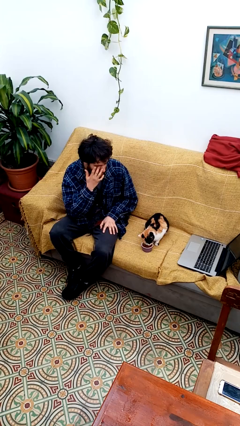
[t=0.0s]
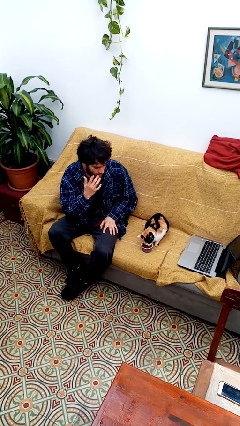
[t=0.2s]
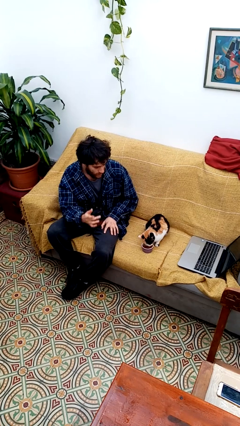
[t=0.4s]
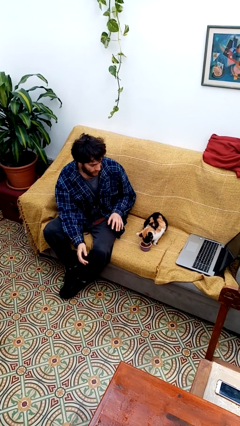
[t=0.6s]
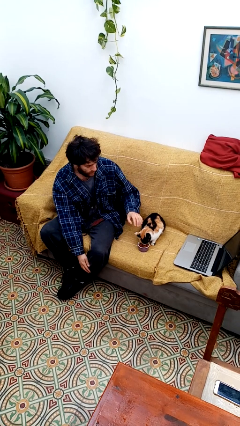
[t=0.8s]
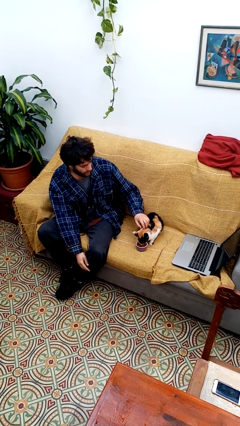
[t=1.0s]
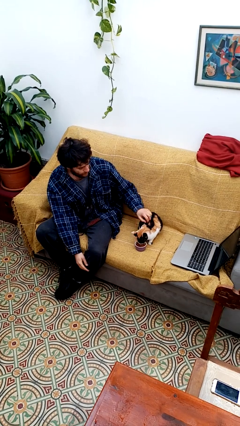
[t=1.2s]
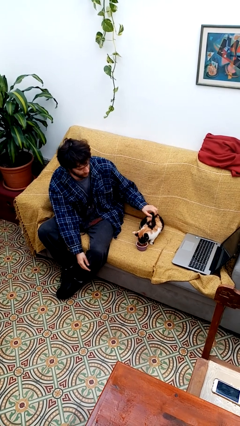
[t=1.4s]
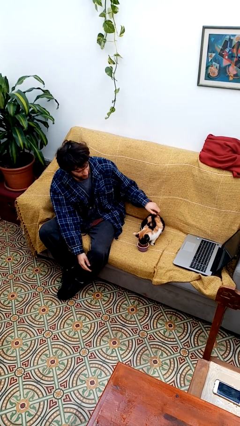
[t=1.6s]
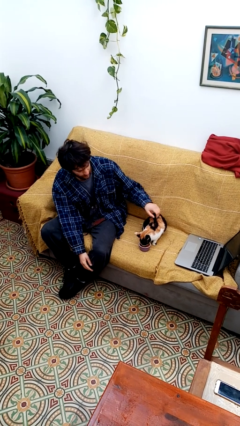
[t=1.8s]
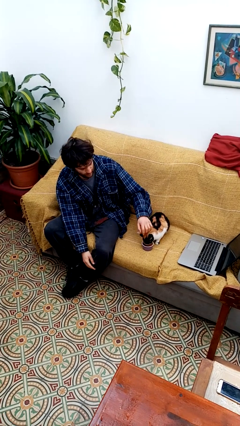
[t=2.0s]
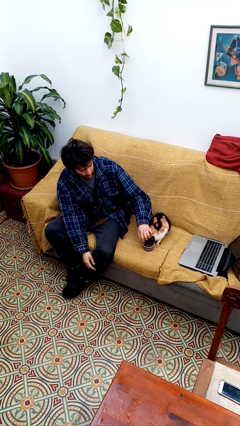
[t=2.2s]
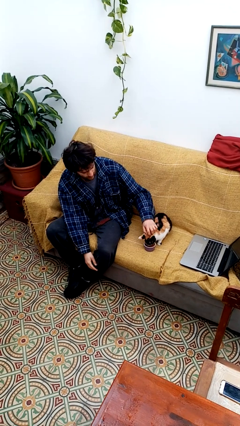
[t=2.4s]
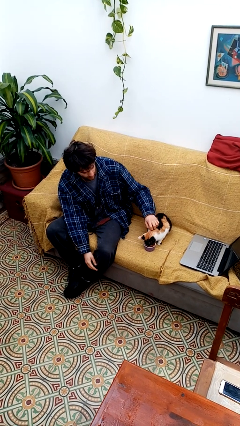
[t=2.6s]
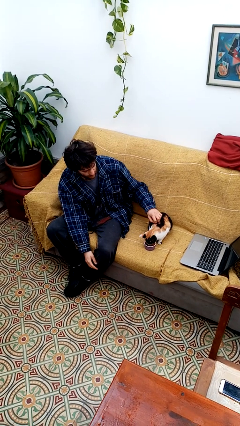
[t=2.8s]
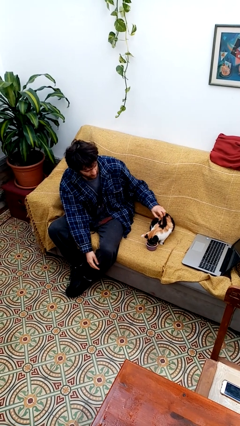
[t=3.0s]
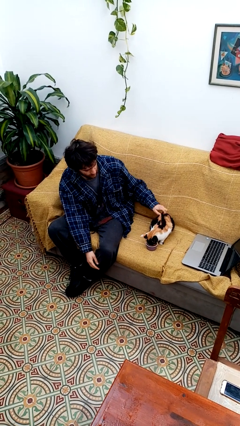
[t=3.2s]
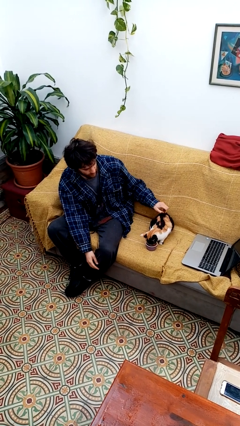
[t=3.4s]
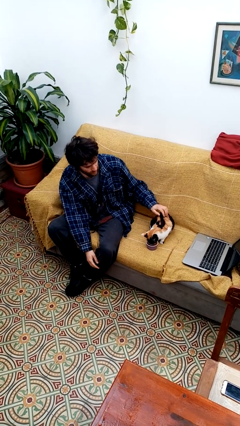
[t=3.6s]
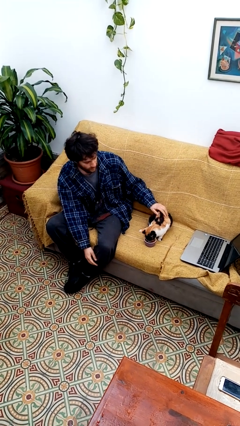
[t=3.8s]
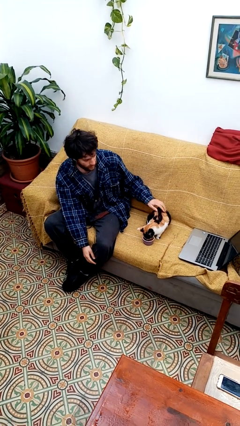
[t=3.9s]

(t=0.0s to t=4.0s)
person pets cat

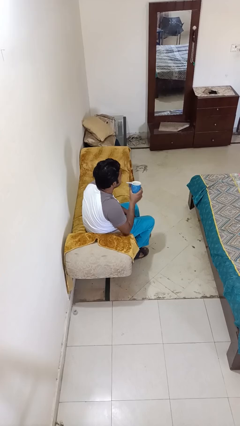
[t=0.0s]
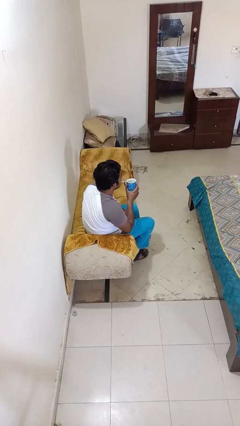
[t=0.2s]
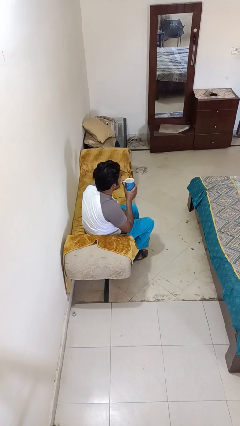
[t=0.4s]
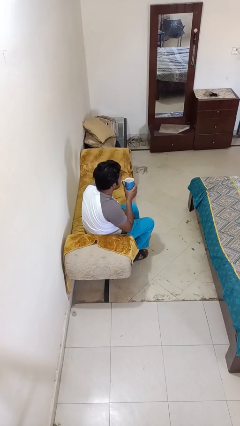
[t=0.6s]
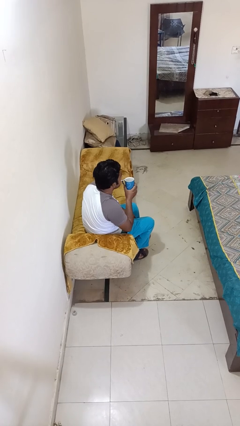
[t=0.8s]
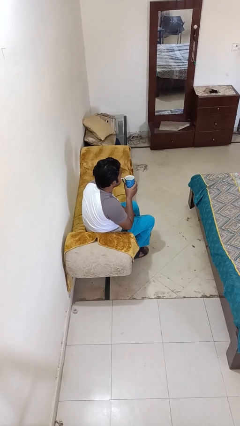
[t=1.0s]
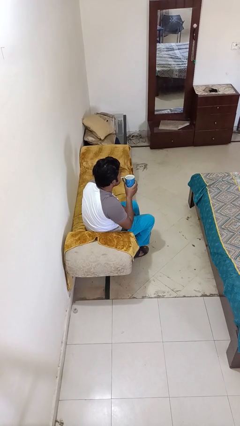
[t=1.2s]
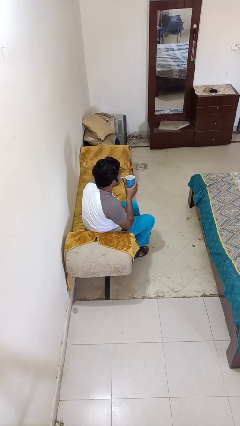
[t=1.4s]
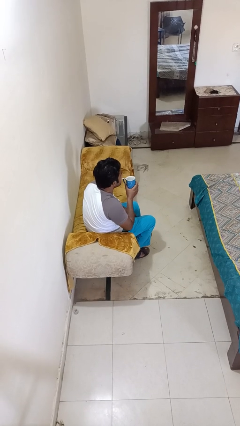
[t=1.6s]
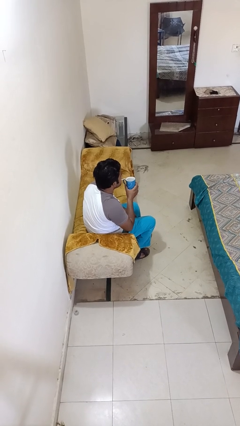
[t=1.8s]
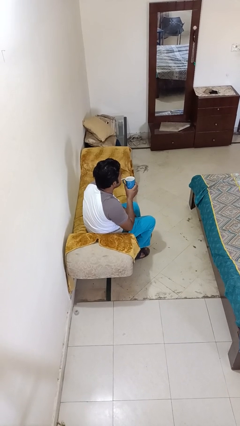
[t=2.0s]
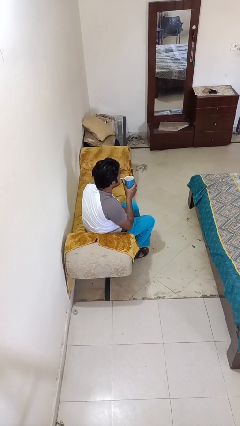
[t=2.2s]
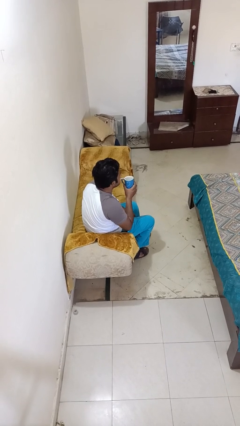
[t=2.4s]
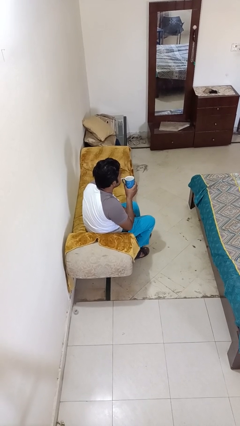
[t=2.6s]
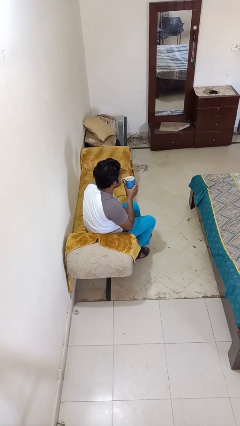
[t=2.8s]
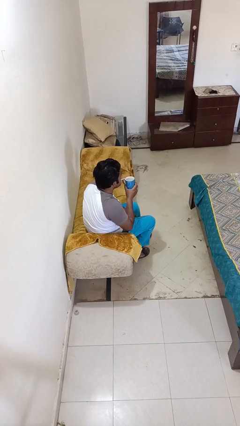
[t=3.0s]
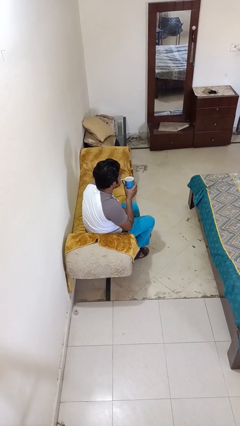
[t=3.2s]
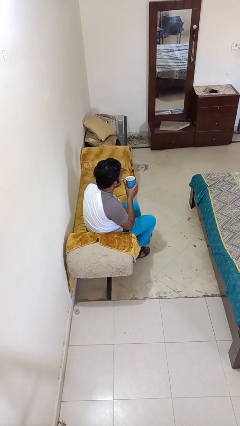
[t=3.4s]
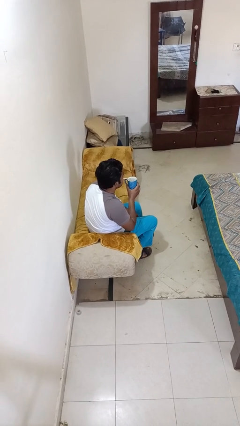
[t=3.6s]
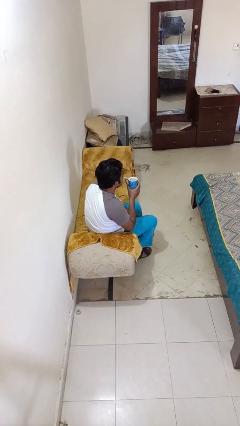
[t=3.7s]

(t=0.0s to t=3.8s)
person drinks from straw

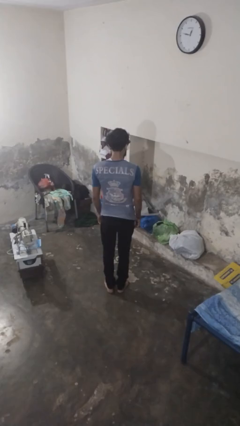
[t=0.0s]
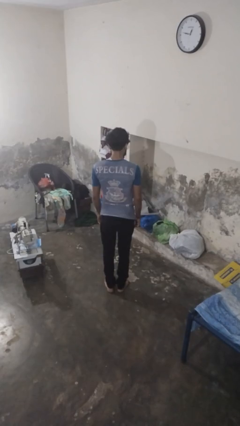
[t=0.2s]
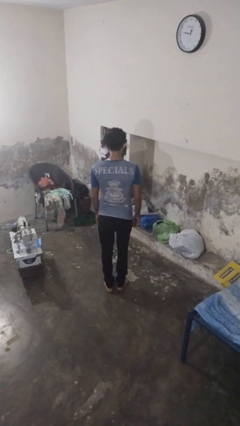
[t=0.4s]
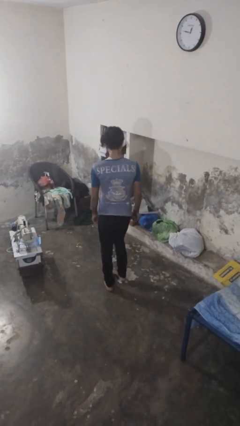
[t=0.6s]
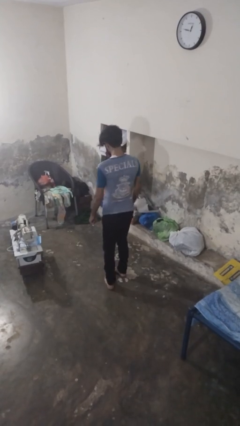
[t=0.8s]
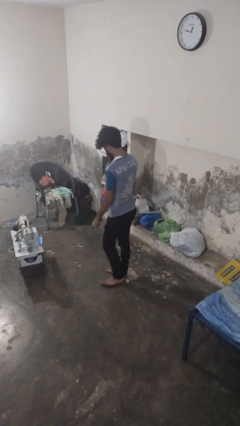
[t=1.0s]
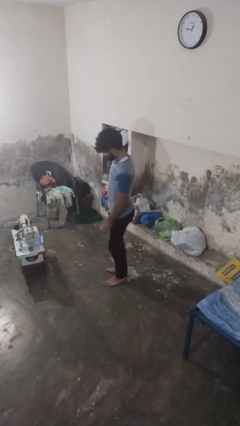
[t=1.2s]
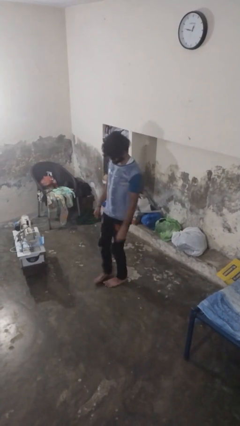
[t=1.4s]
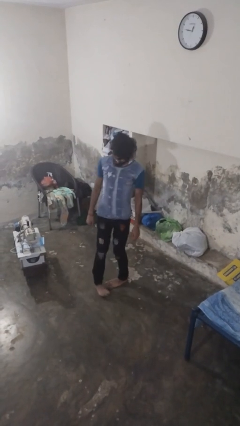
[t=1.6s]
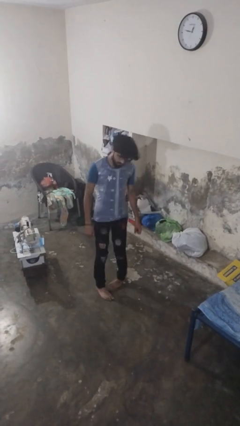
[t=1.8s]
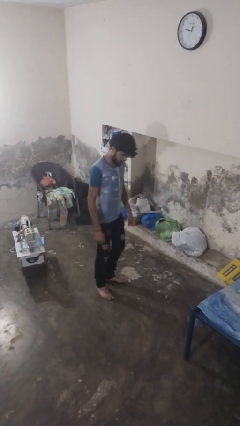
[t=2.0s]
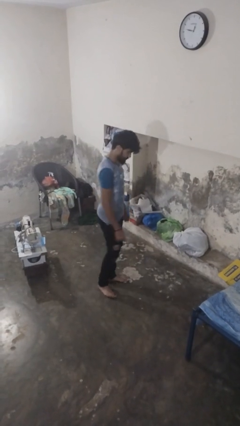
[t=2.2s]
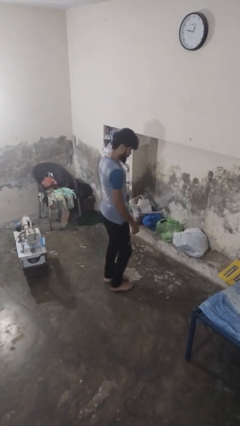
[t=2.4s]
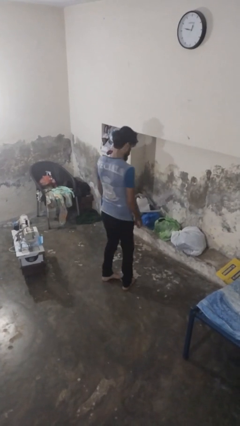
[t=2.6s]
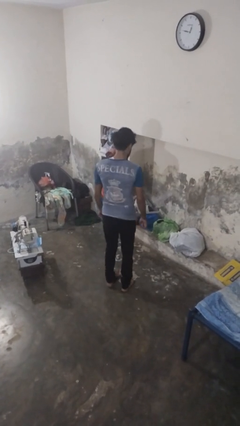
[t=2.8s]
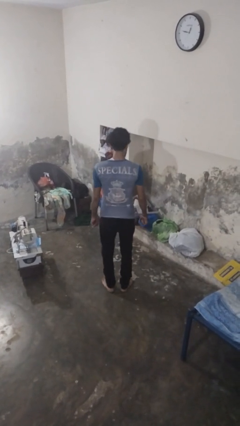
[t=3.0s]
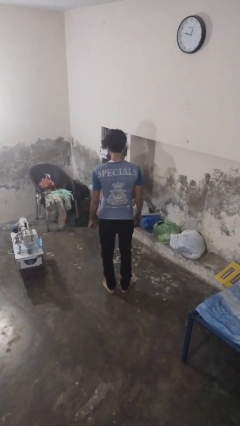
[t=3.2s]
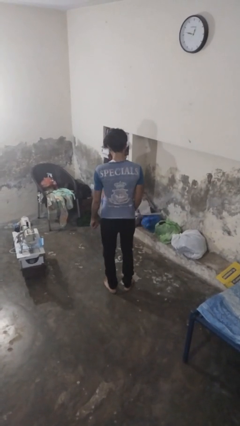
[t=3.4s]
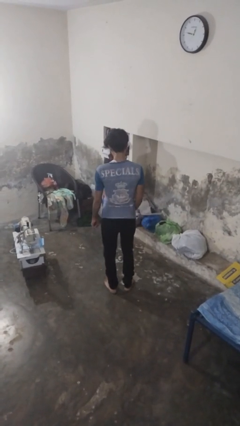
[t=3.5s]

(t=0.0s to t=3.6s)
person twirls

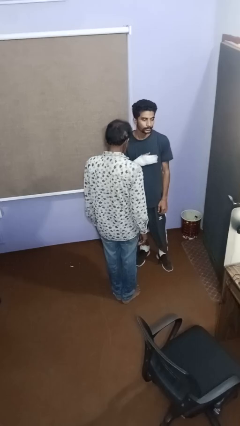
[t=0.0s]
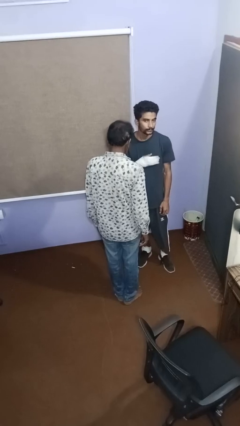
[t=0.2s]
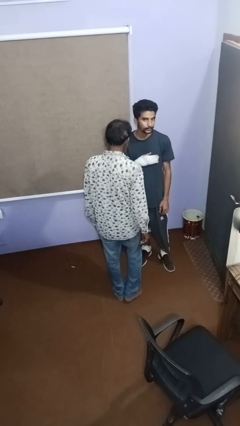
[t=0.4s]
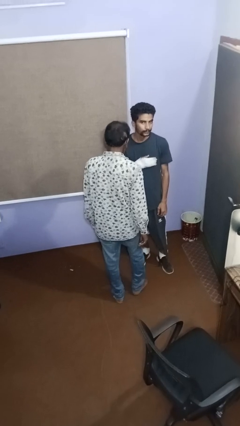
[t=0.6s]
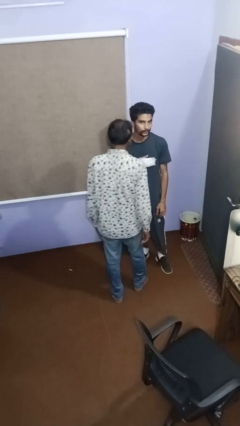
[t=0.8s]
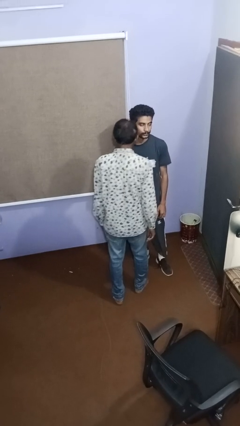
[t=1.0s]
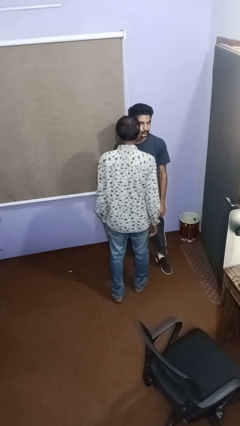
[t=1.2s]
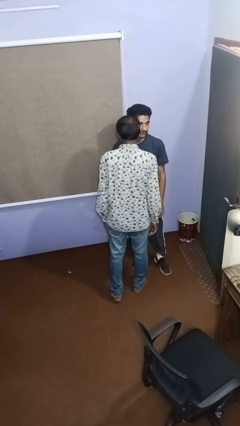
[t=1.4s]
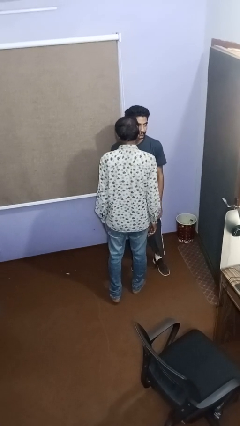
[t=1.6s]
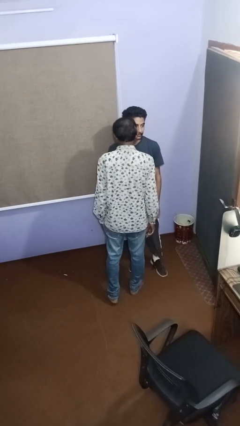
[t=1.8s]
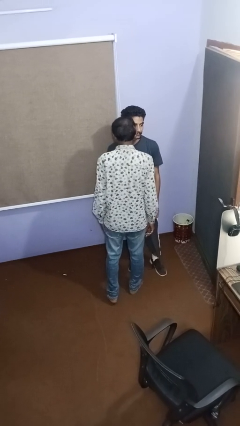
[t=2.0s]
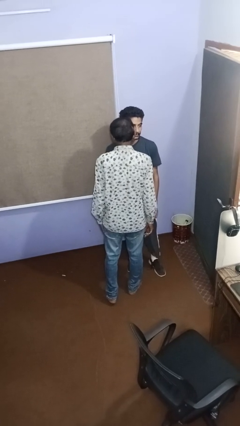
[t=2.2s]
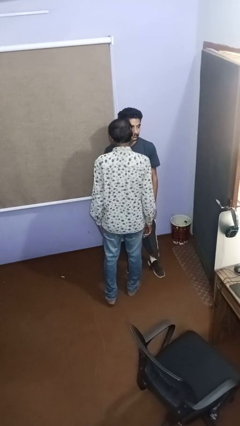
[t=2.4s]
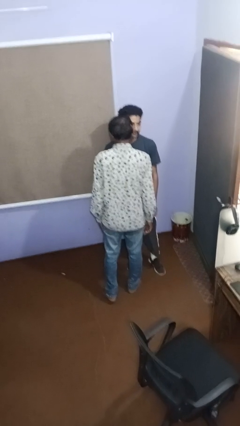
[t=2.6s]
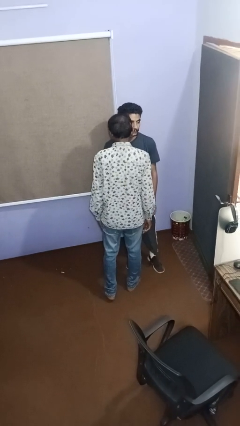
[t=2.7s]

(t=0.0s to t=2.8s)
person kisses cheek of person

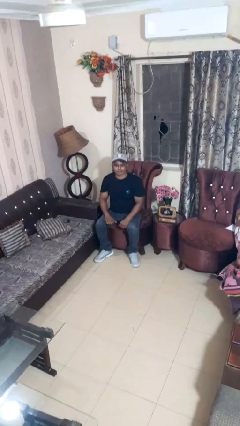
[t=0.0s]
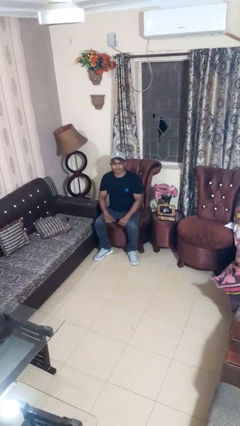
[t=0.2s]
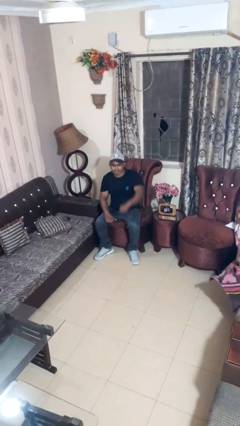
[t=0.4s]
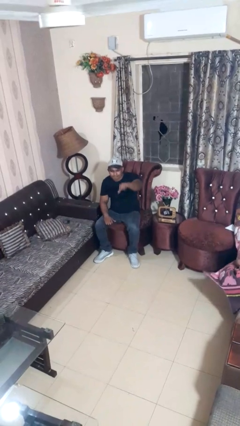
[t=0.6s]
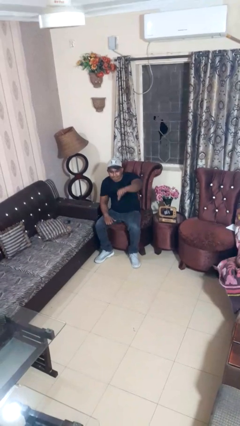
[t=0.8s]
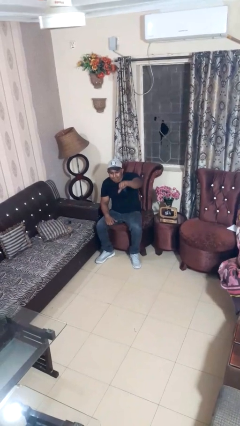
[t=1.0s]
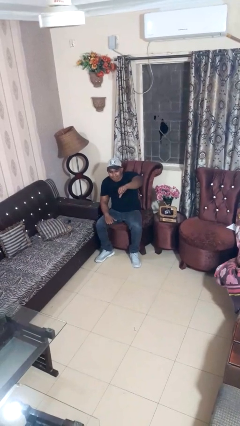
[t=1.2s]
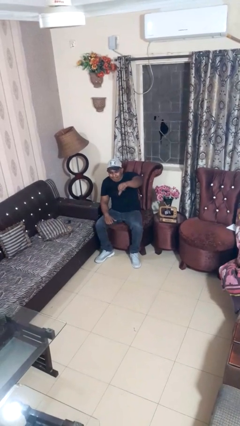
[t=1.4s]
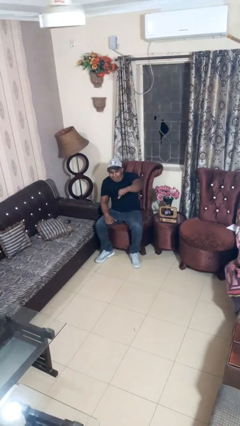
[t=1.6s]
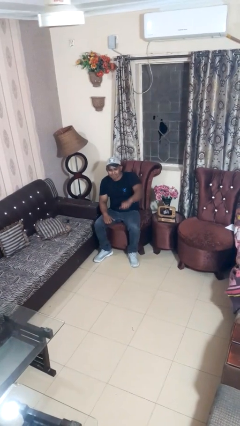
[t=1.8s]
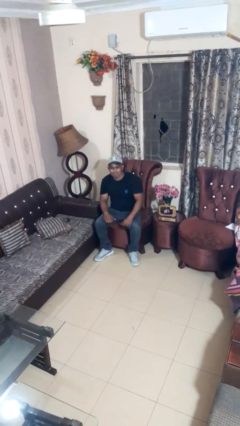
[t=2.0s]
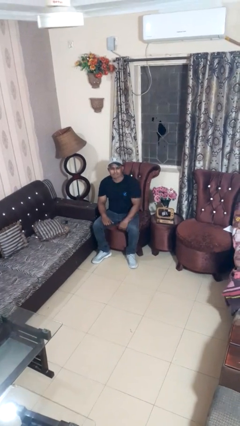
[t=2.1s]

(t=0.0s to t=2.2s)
person gestures thumbs down

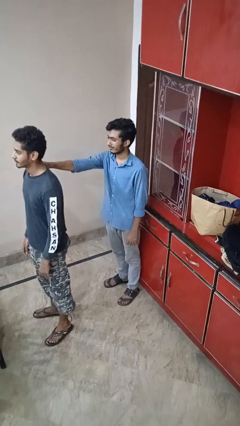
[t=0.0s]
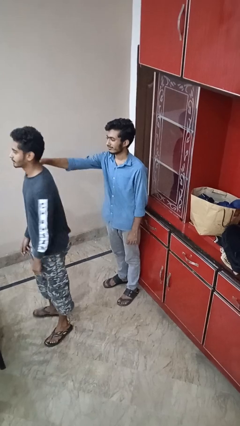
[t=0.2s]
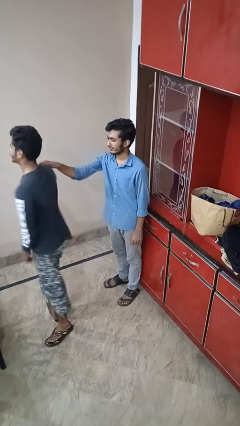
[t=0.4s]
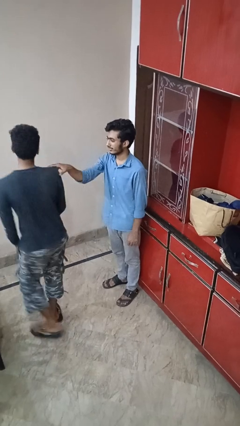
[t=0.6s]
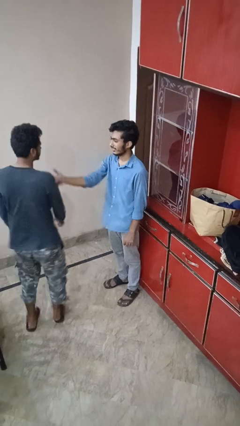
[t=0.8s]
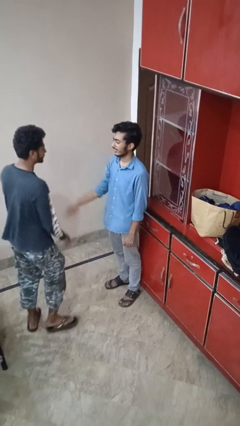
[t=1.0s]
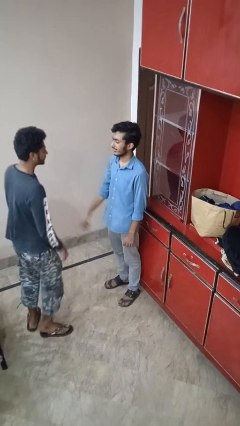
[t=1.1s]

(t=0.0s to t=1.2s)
person spins person around
